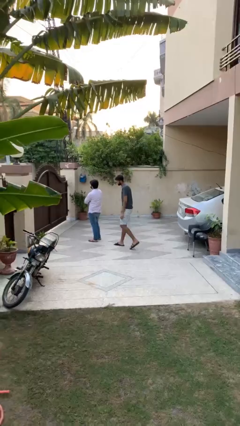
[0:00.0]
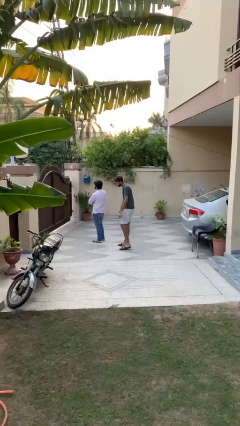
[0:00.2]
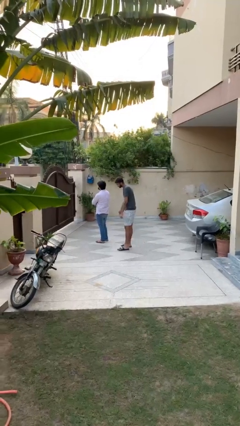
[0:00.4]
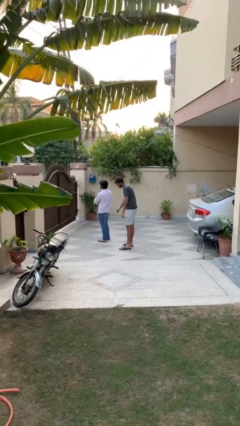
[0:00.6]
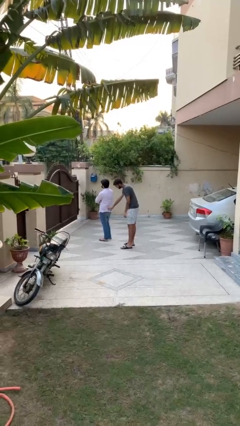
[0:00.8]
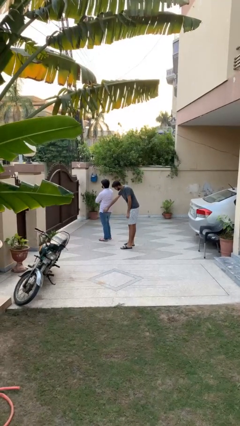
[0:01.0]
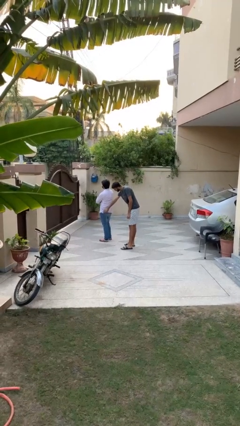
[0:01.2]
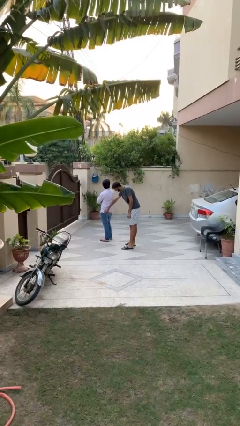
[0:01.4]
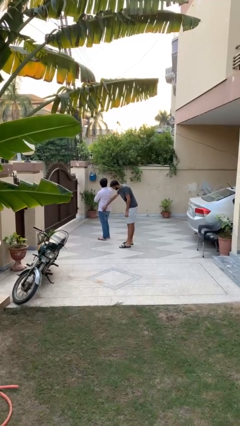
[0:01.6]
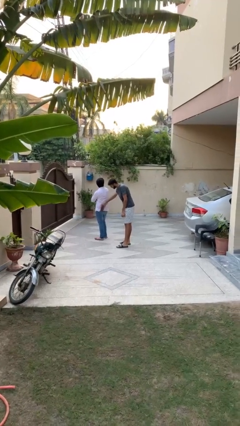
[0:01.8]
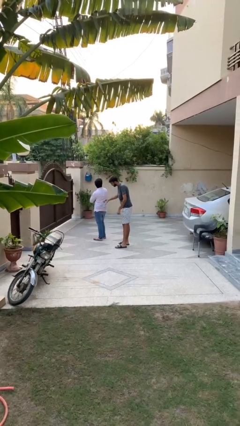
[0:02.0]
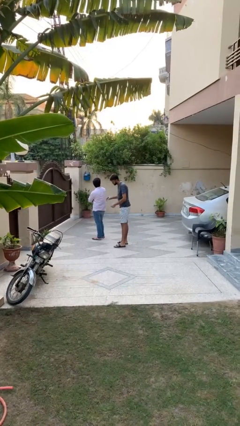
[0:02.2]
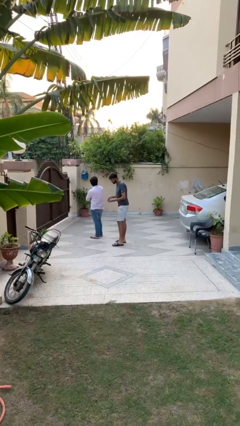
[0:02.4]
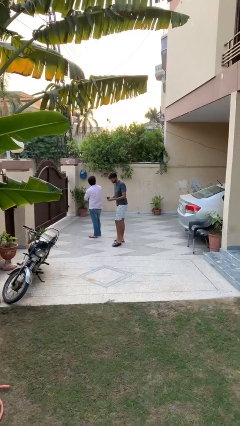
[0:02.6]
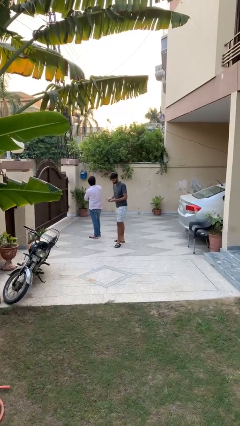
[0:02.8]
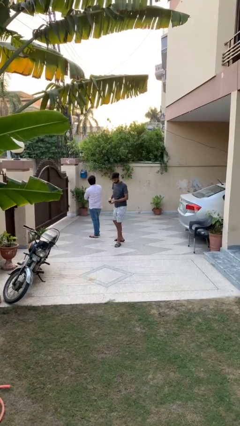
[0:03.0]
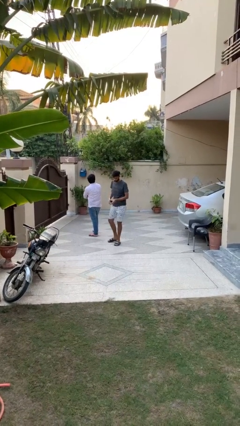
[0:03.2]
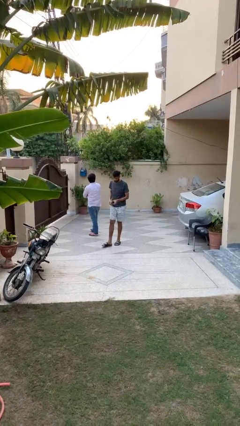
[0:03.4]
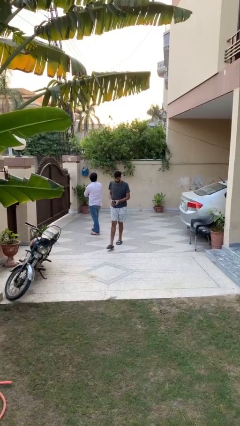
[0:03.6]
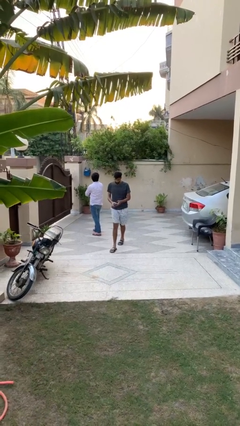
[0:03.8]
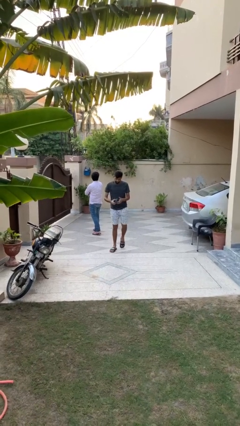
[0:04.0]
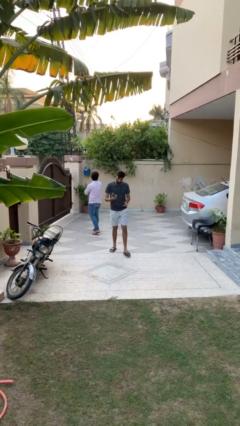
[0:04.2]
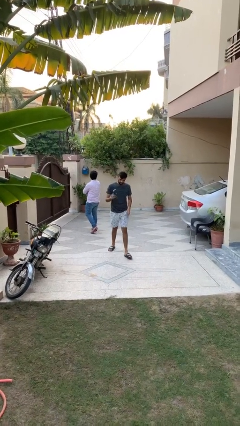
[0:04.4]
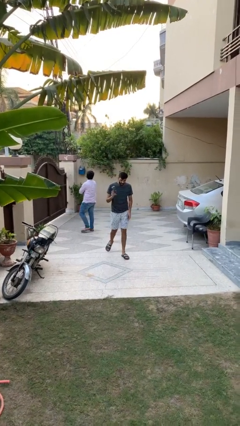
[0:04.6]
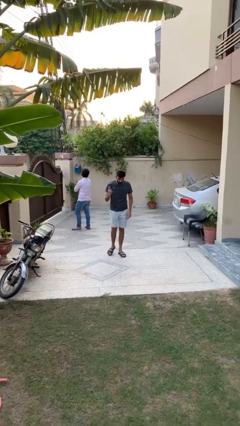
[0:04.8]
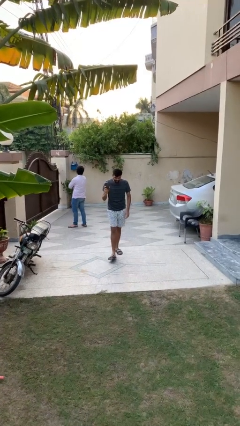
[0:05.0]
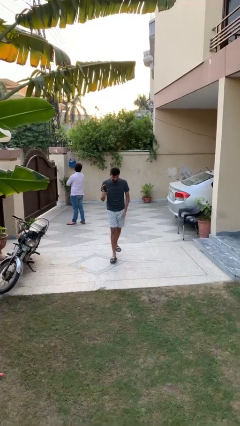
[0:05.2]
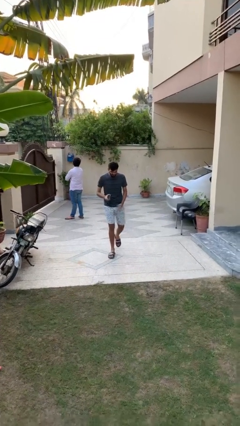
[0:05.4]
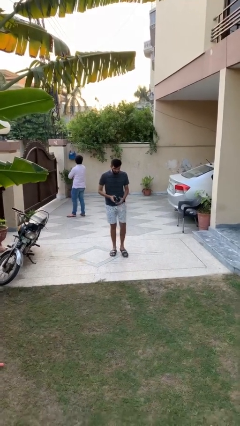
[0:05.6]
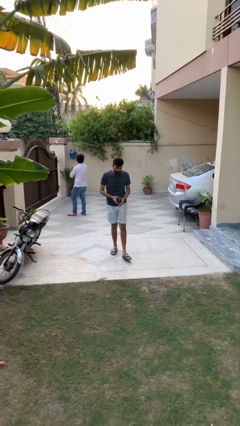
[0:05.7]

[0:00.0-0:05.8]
person steals object from person

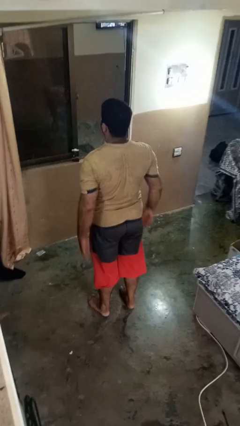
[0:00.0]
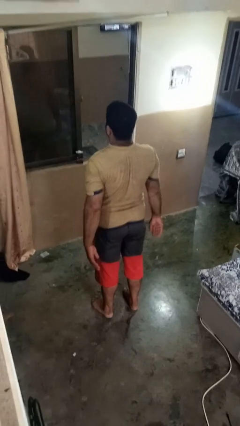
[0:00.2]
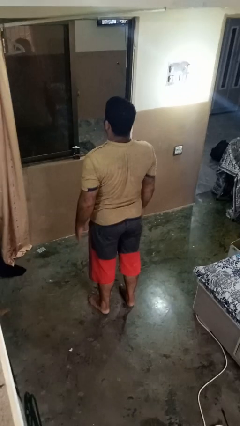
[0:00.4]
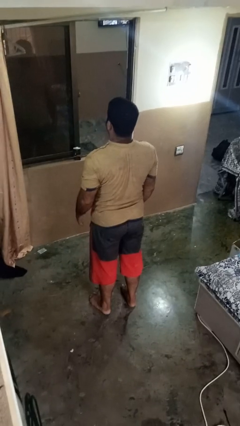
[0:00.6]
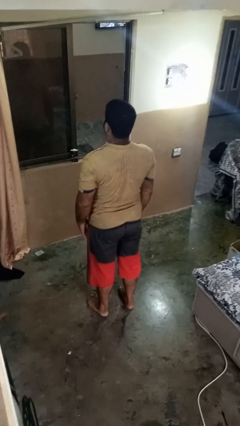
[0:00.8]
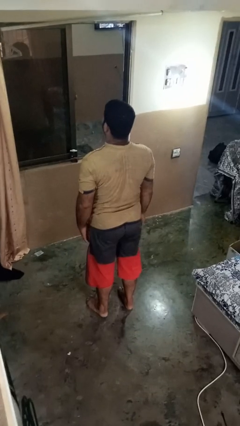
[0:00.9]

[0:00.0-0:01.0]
person stands up

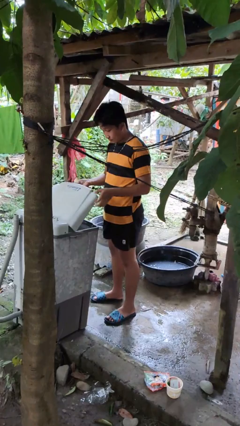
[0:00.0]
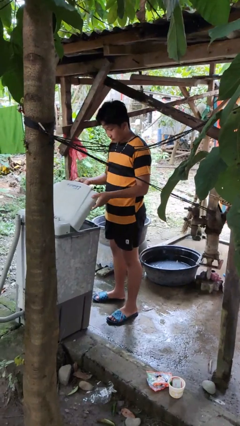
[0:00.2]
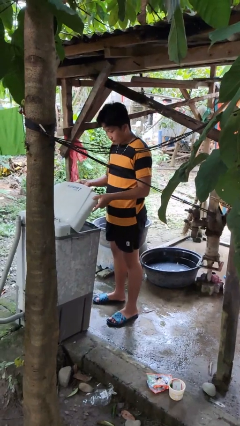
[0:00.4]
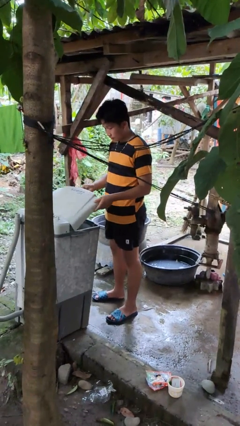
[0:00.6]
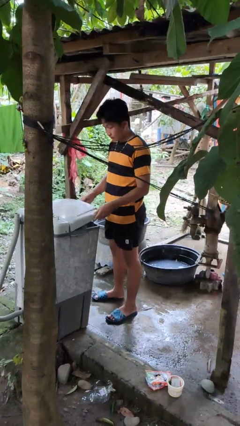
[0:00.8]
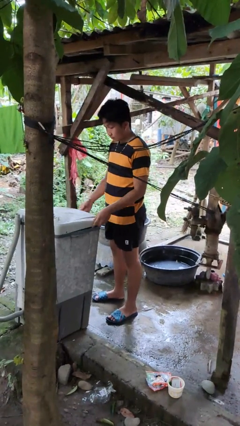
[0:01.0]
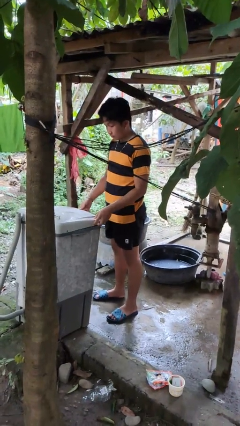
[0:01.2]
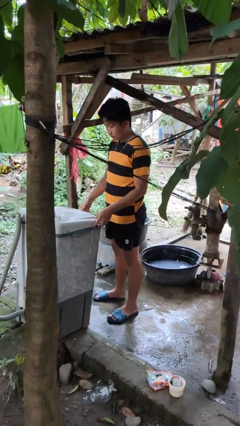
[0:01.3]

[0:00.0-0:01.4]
person closes clothes washer

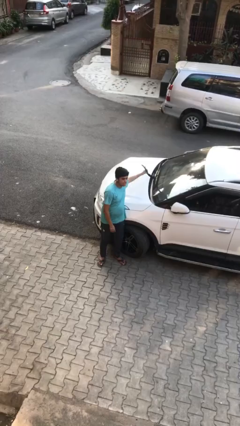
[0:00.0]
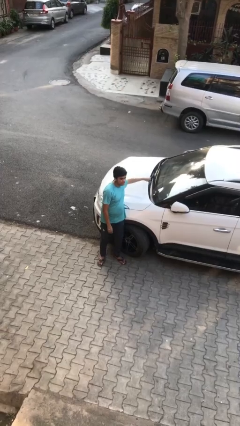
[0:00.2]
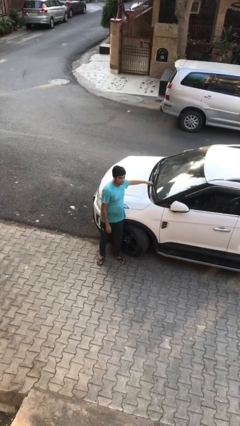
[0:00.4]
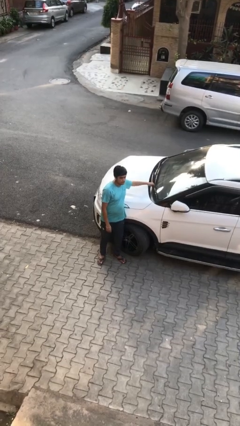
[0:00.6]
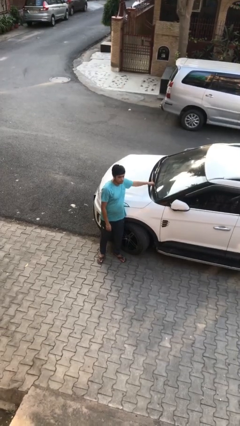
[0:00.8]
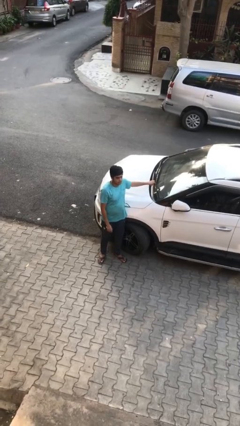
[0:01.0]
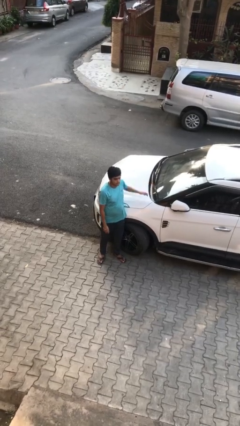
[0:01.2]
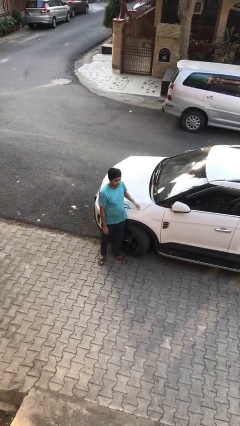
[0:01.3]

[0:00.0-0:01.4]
person flips down car wipers

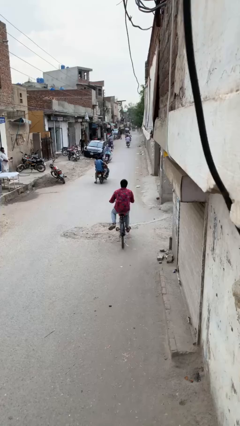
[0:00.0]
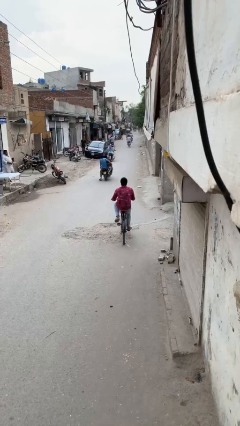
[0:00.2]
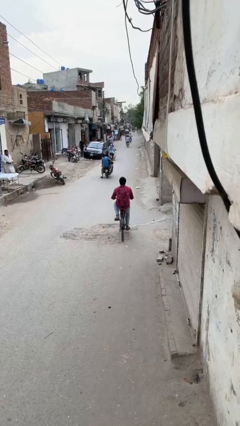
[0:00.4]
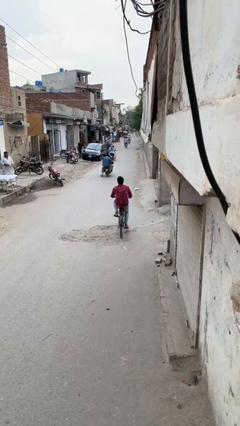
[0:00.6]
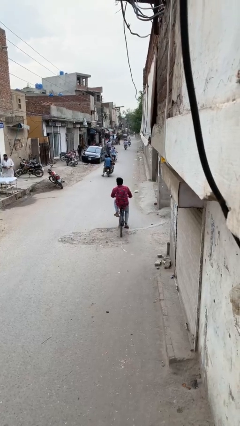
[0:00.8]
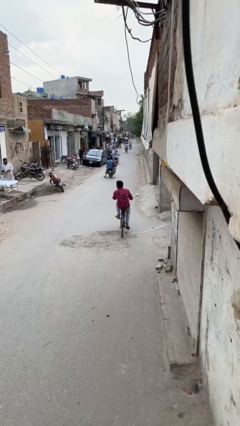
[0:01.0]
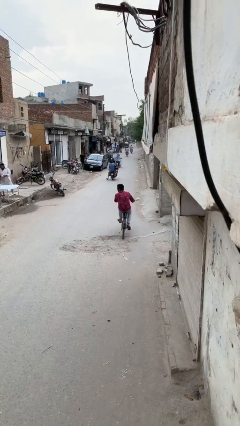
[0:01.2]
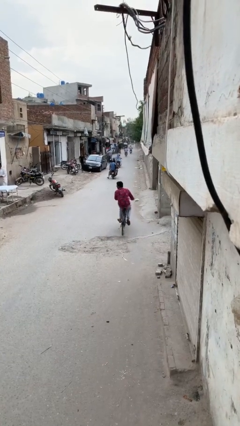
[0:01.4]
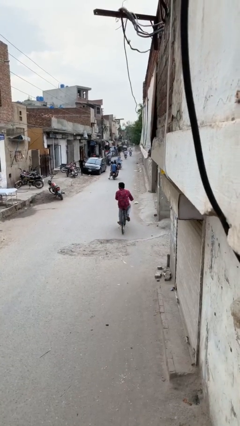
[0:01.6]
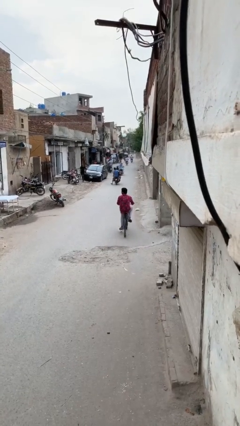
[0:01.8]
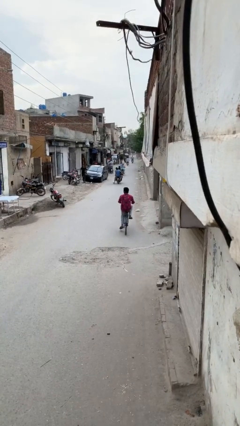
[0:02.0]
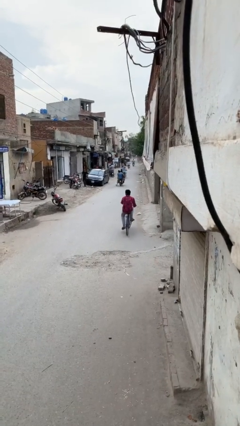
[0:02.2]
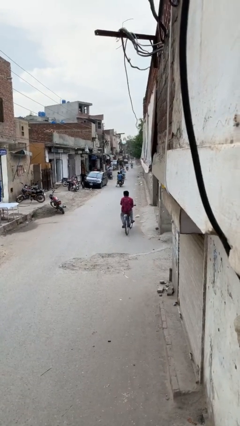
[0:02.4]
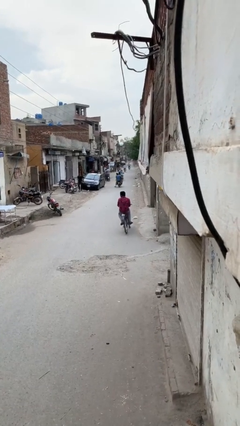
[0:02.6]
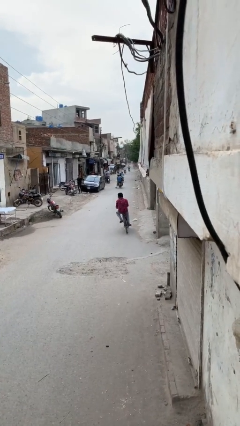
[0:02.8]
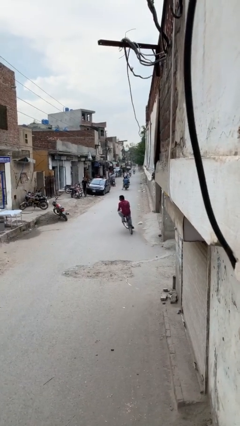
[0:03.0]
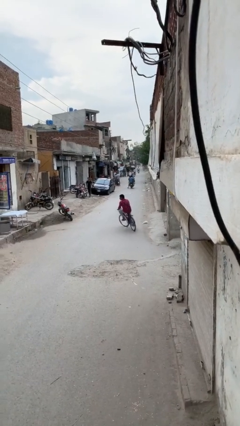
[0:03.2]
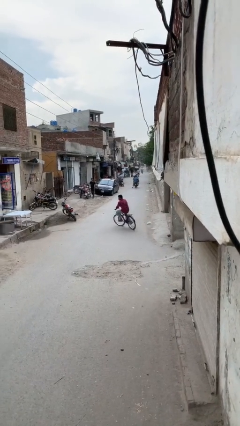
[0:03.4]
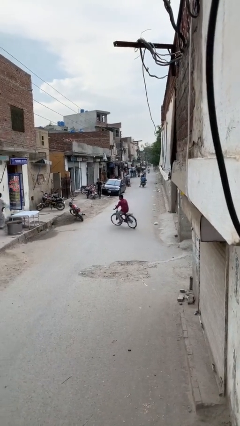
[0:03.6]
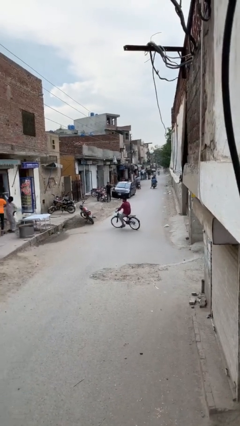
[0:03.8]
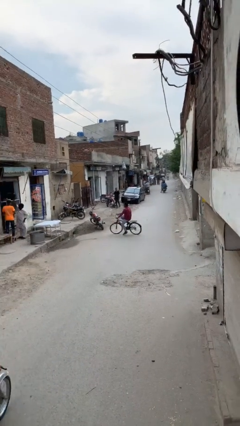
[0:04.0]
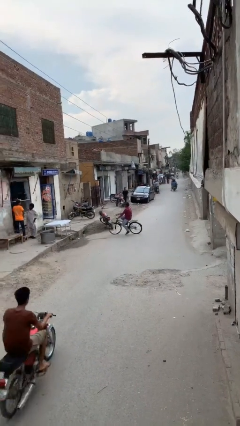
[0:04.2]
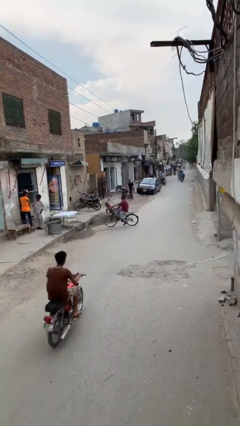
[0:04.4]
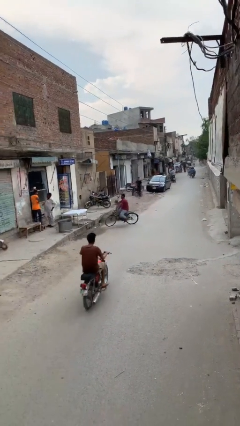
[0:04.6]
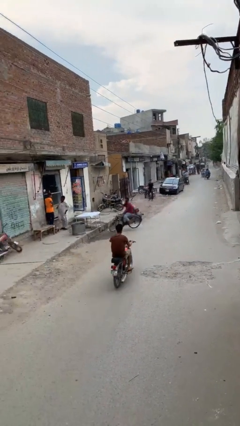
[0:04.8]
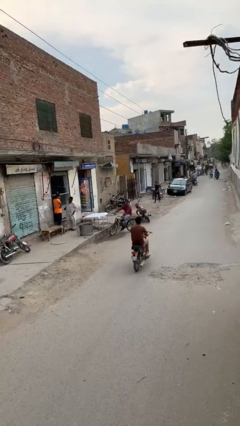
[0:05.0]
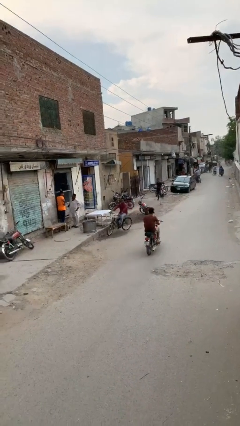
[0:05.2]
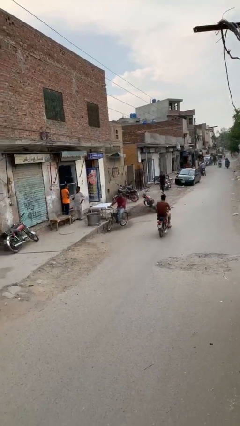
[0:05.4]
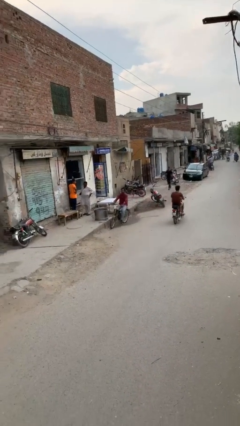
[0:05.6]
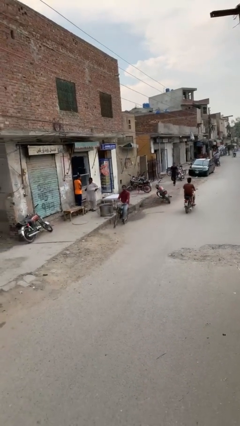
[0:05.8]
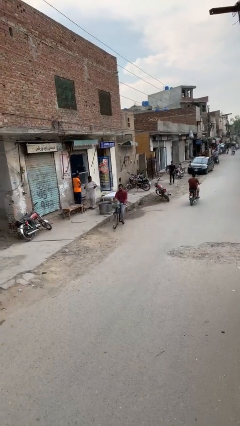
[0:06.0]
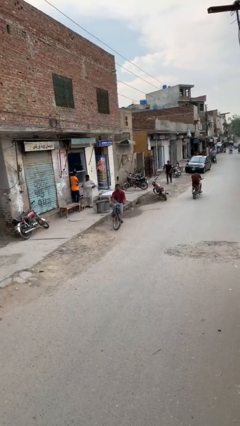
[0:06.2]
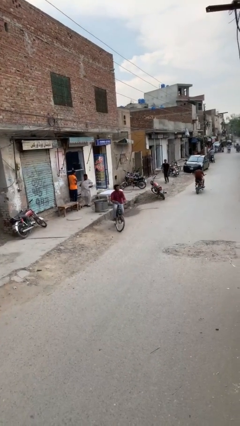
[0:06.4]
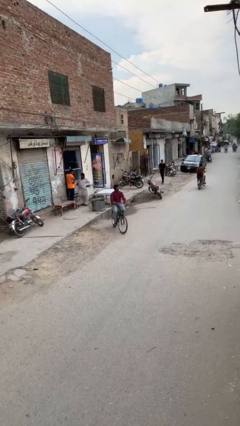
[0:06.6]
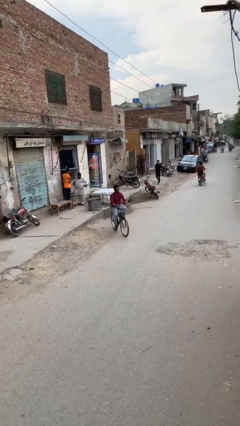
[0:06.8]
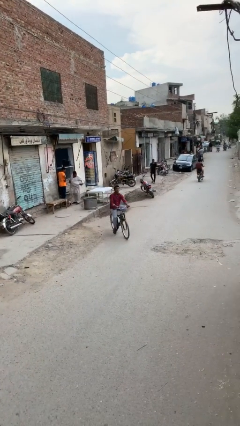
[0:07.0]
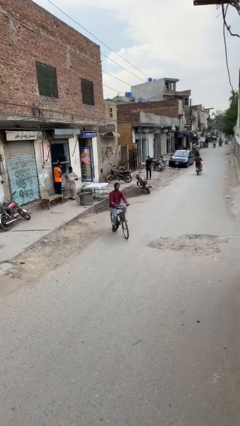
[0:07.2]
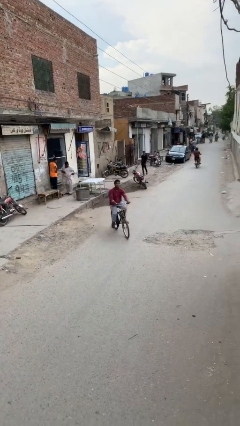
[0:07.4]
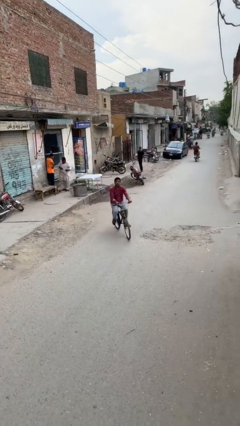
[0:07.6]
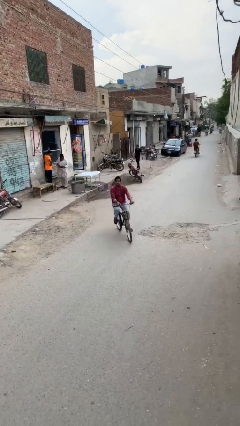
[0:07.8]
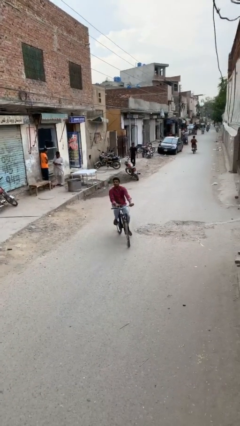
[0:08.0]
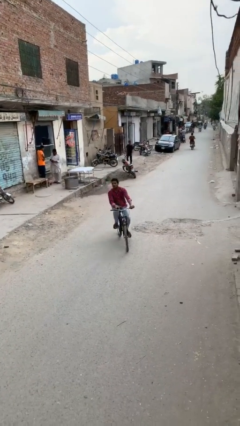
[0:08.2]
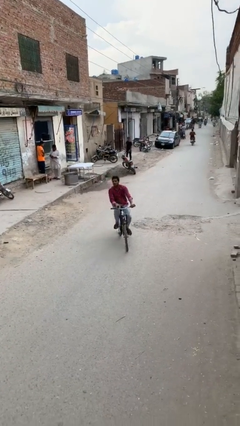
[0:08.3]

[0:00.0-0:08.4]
person rides bicycle
